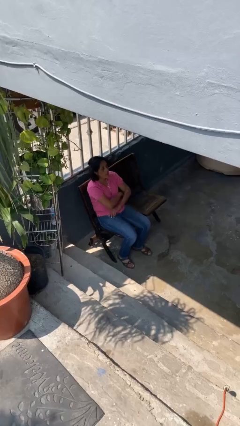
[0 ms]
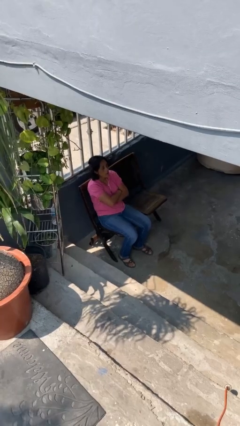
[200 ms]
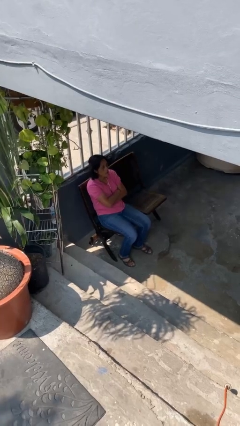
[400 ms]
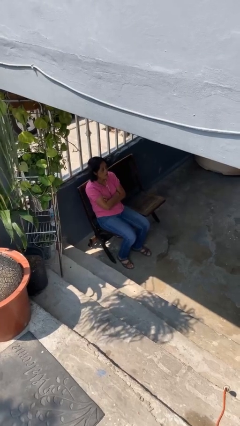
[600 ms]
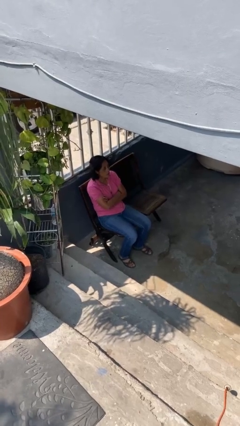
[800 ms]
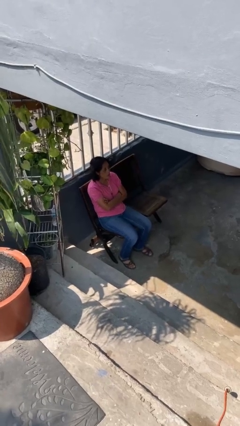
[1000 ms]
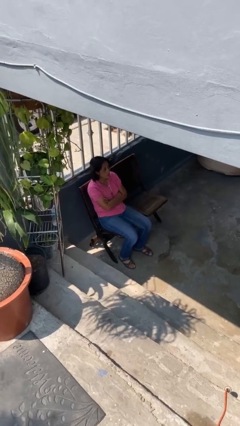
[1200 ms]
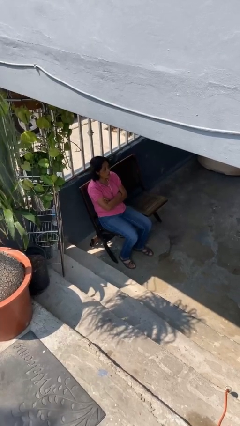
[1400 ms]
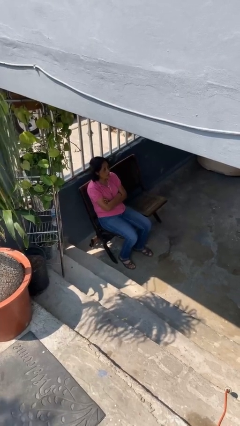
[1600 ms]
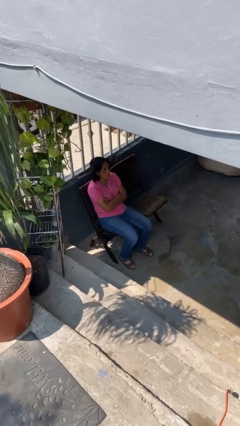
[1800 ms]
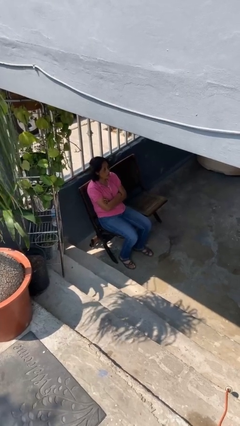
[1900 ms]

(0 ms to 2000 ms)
person crosses arms

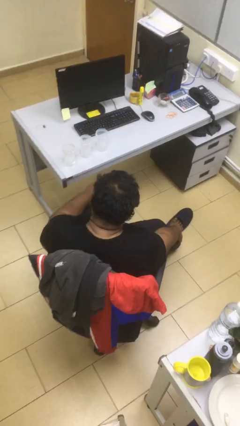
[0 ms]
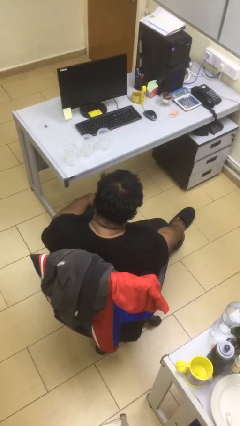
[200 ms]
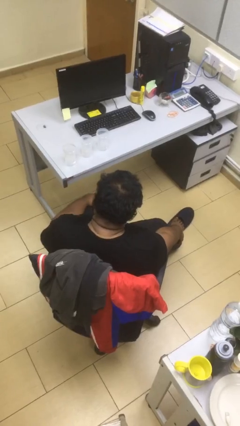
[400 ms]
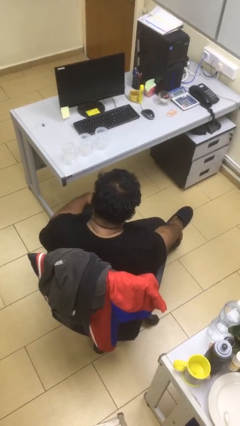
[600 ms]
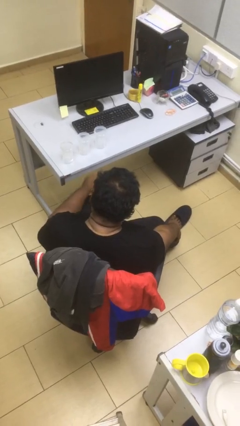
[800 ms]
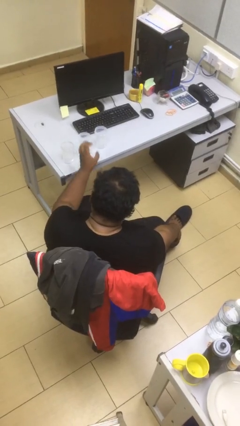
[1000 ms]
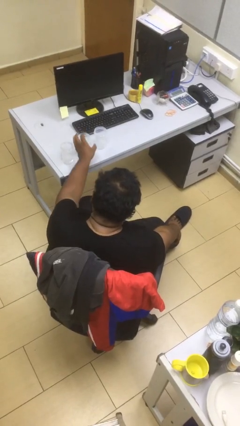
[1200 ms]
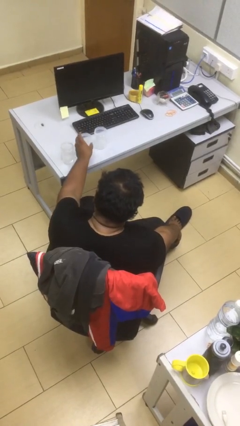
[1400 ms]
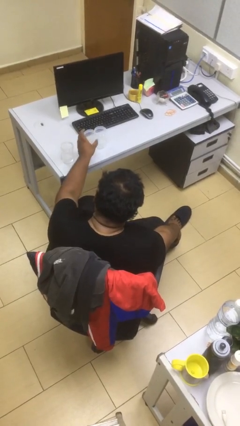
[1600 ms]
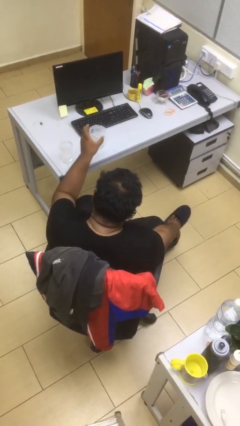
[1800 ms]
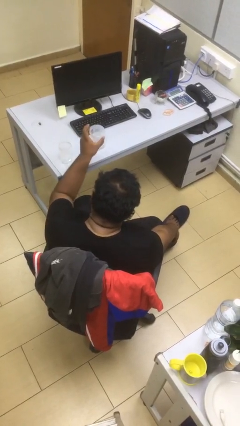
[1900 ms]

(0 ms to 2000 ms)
person picks up object from table

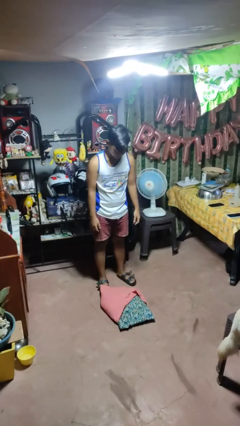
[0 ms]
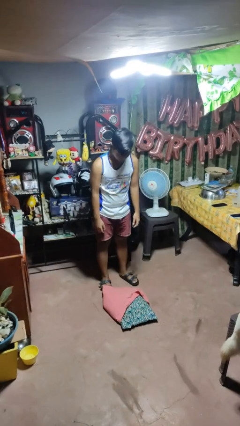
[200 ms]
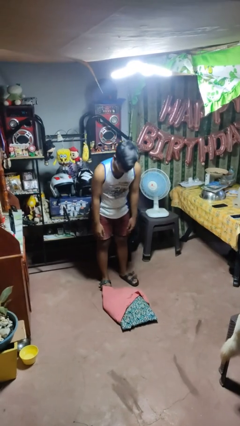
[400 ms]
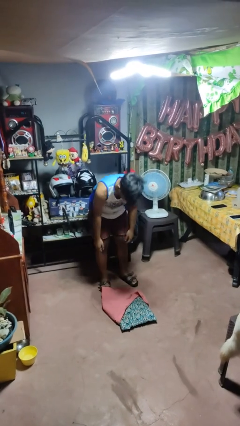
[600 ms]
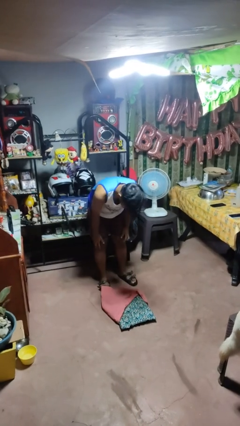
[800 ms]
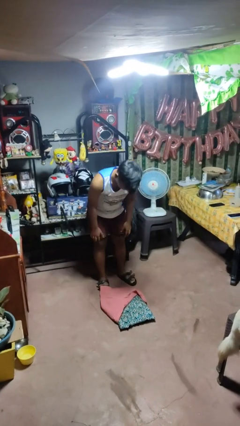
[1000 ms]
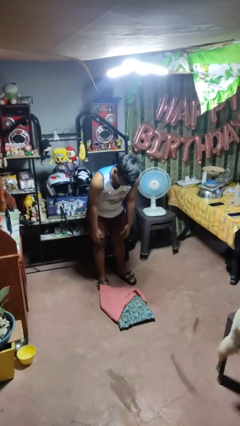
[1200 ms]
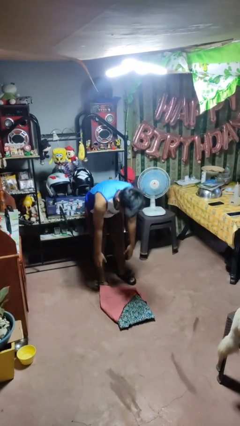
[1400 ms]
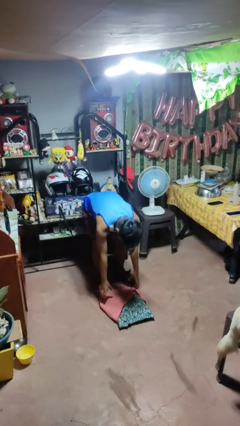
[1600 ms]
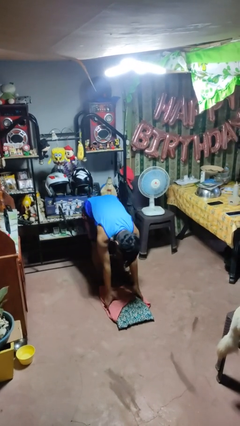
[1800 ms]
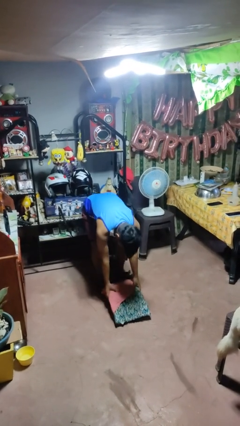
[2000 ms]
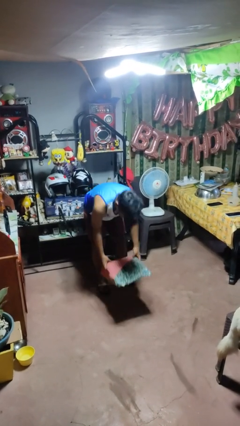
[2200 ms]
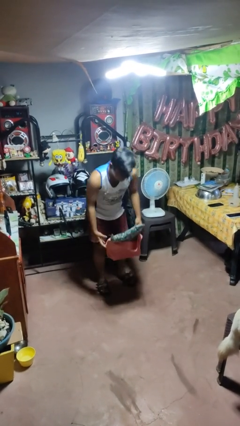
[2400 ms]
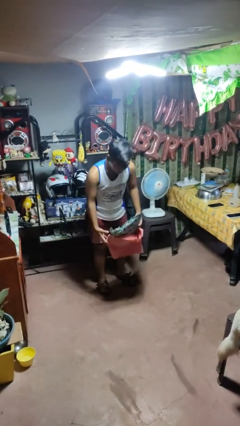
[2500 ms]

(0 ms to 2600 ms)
person picks up object from floor

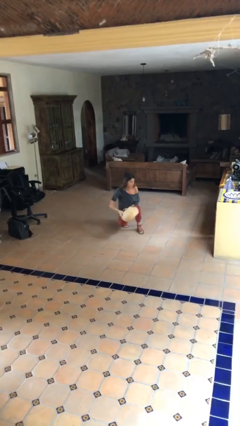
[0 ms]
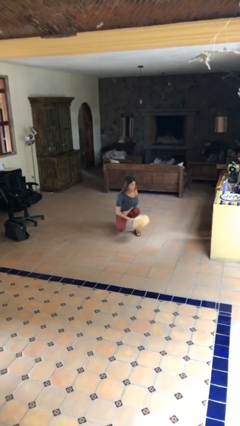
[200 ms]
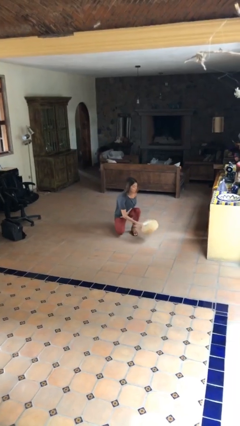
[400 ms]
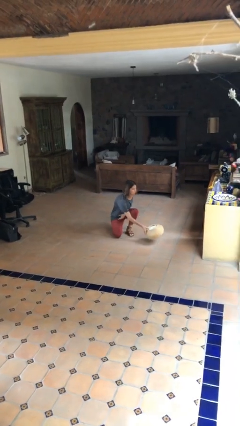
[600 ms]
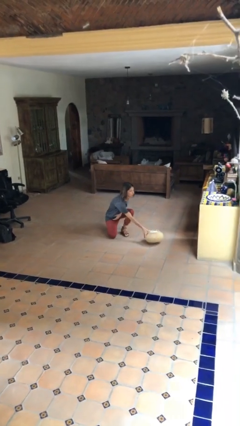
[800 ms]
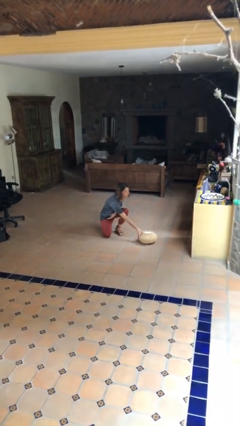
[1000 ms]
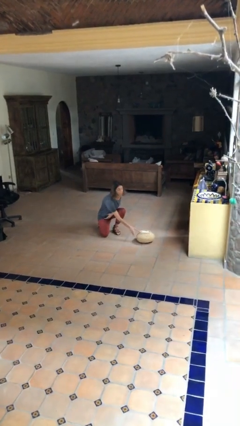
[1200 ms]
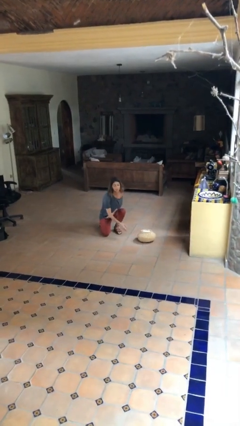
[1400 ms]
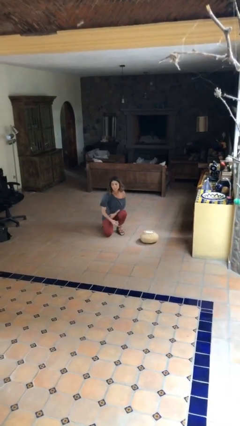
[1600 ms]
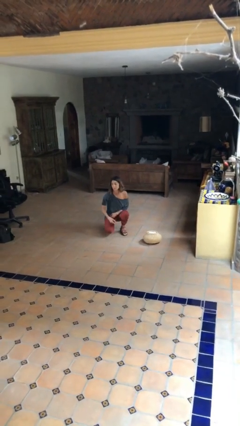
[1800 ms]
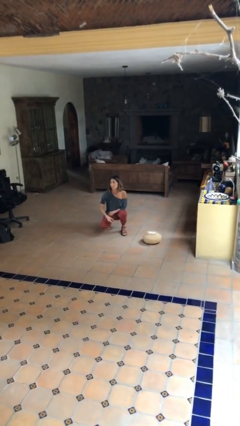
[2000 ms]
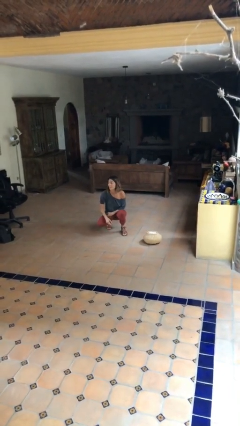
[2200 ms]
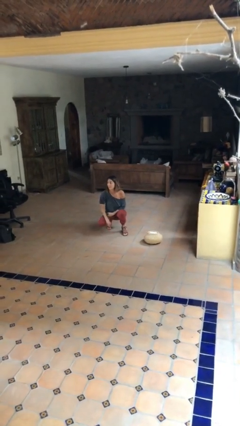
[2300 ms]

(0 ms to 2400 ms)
person puts down object on floor

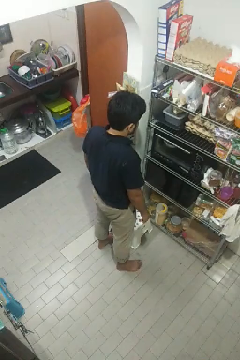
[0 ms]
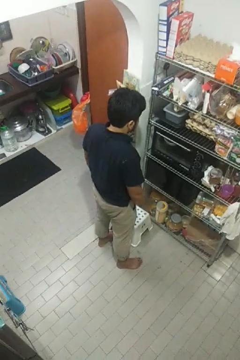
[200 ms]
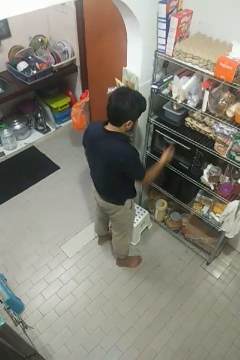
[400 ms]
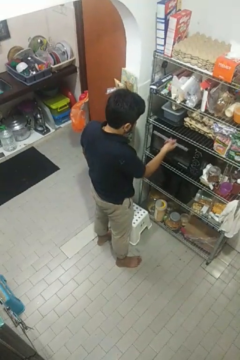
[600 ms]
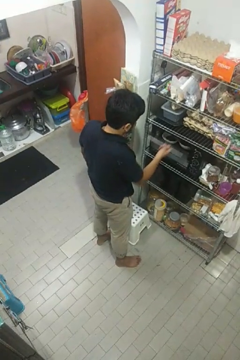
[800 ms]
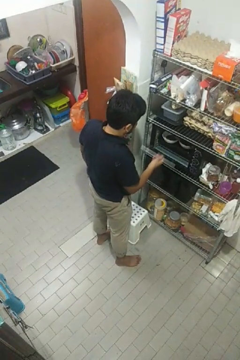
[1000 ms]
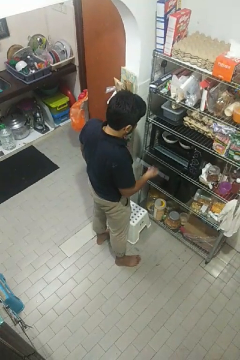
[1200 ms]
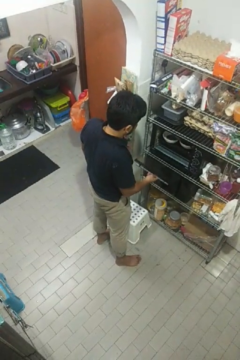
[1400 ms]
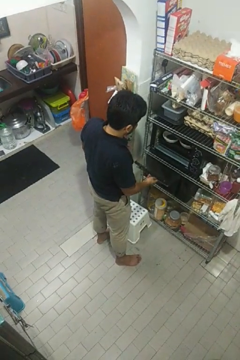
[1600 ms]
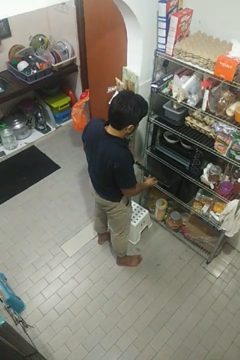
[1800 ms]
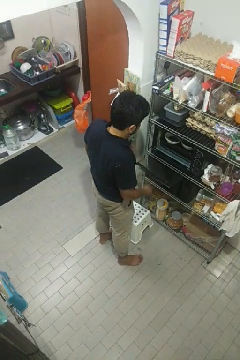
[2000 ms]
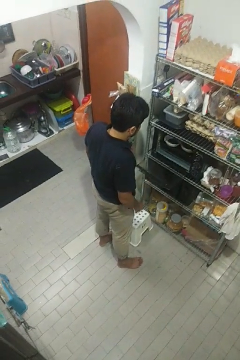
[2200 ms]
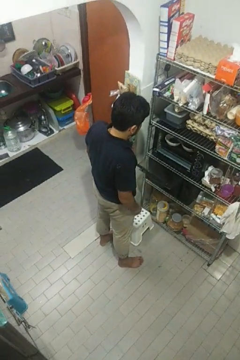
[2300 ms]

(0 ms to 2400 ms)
person opens oven door

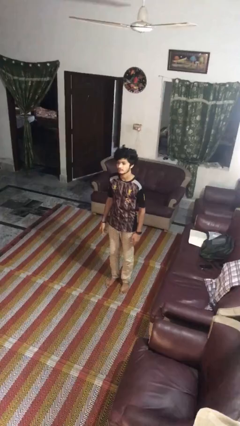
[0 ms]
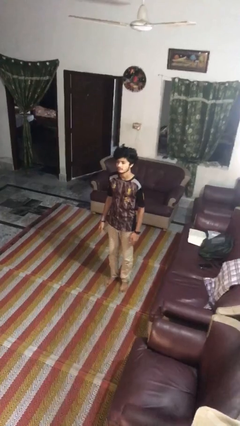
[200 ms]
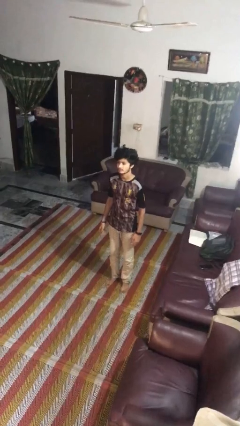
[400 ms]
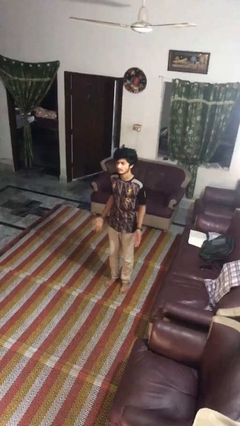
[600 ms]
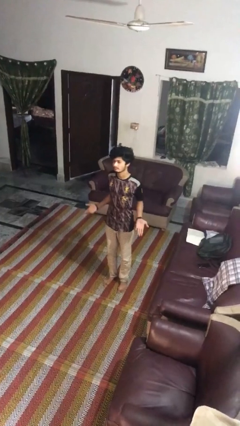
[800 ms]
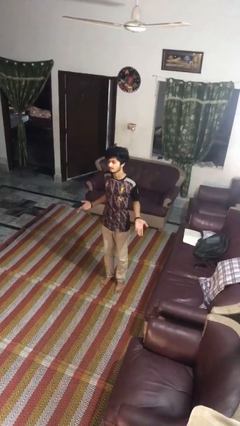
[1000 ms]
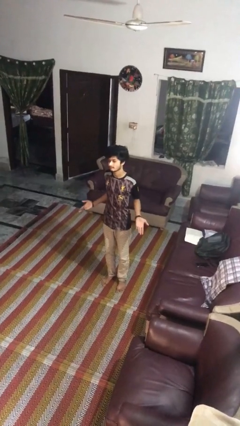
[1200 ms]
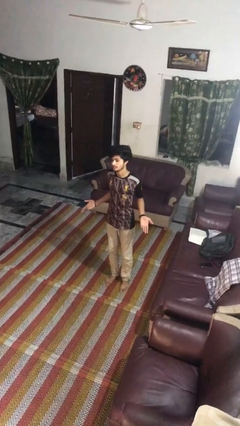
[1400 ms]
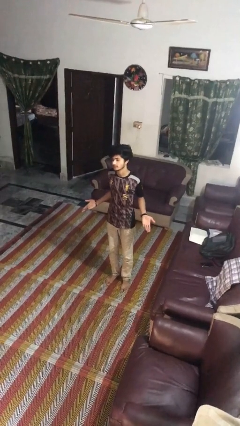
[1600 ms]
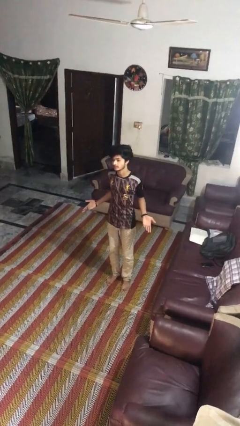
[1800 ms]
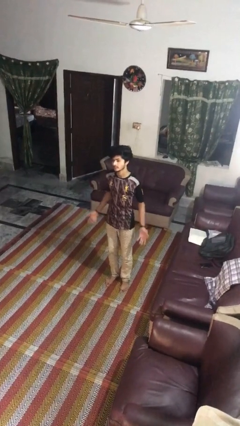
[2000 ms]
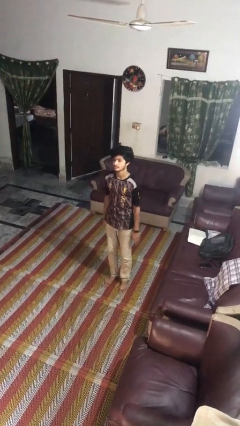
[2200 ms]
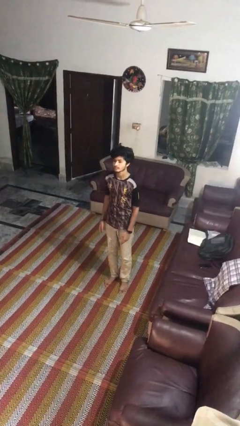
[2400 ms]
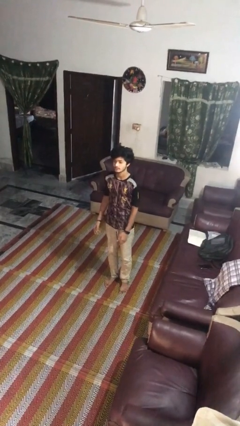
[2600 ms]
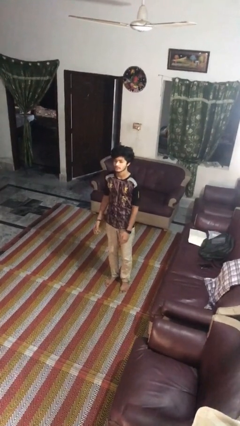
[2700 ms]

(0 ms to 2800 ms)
person shrugs

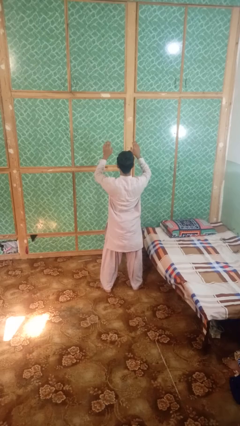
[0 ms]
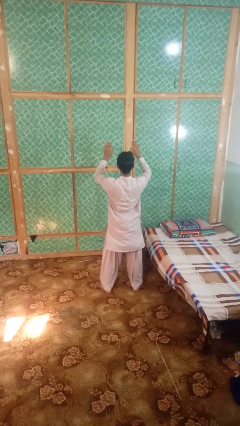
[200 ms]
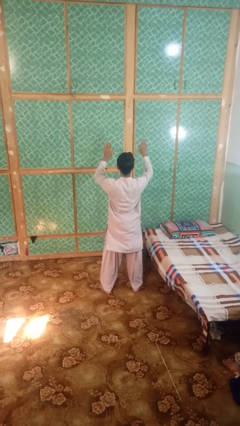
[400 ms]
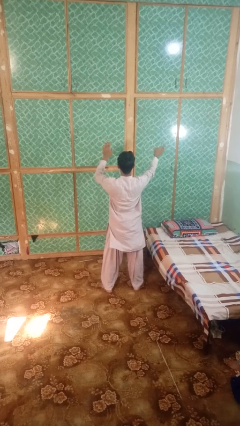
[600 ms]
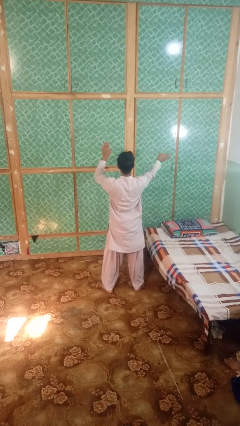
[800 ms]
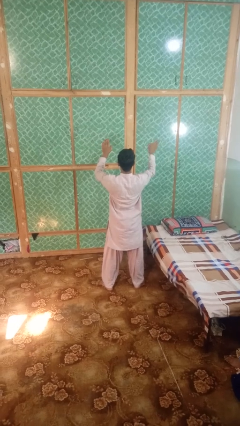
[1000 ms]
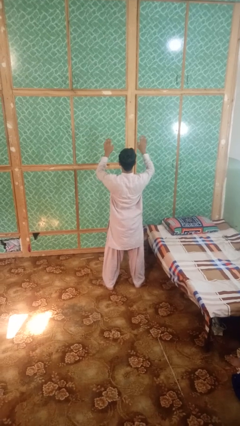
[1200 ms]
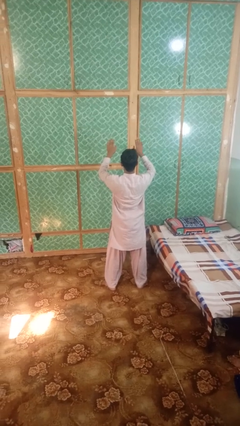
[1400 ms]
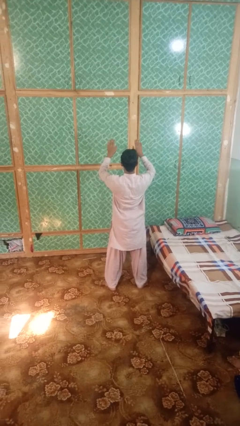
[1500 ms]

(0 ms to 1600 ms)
person gestures swipe right

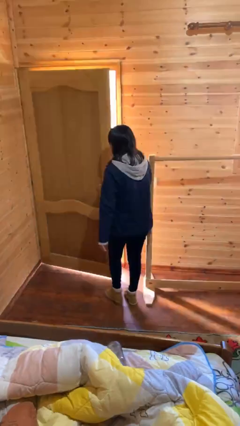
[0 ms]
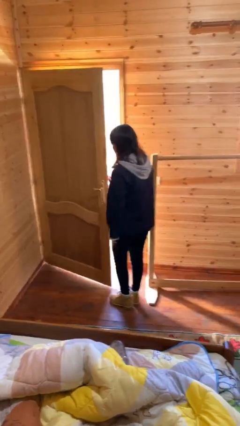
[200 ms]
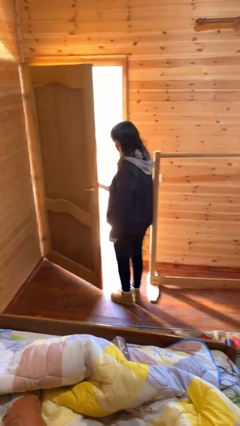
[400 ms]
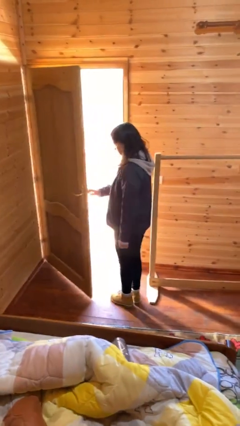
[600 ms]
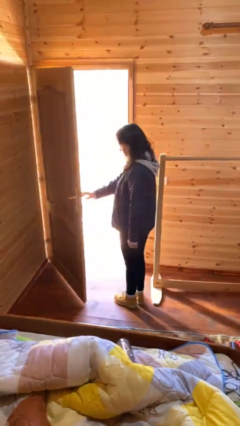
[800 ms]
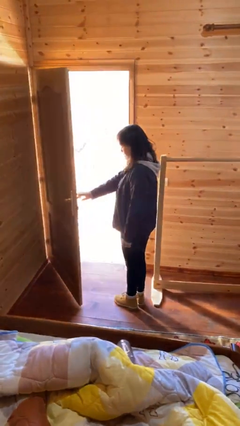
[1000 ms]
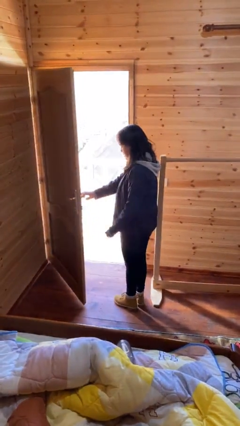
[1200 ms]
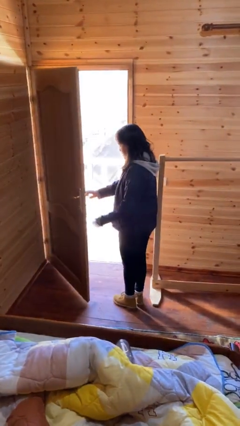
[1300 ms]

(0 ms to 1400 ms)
person opens facility door

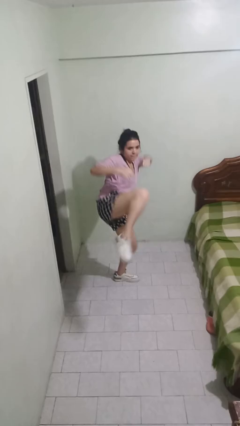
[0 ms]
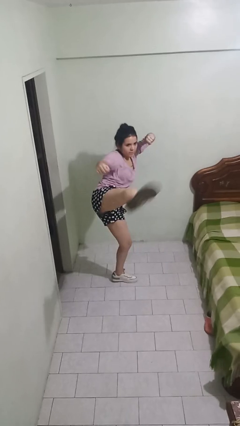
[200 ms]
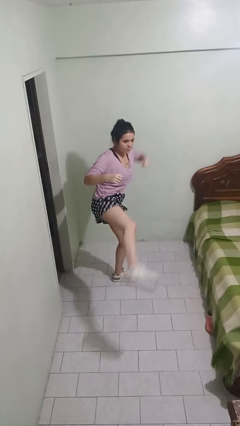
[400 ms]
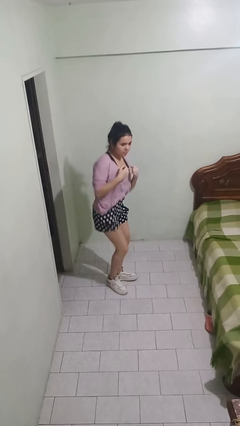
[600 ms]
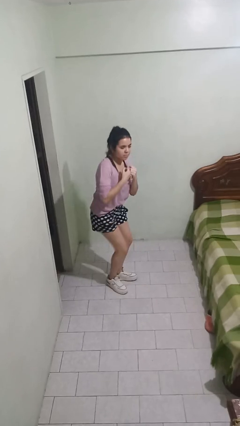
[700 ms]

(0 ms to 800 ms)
person karate kicks
